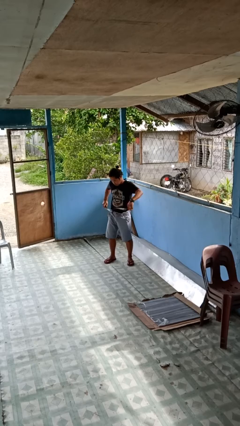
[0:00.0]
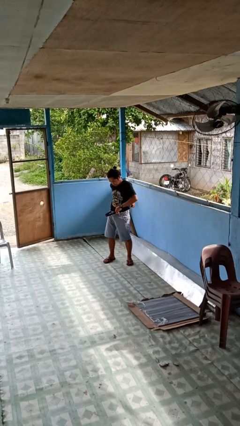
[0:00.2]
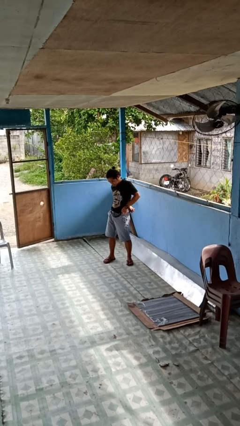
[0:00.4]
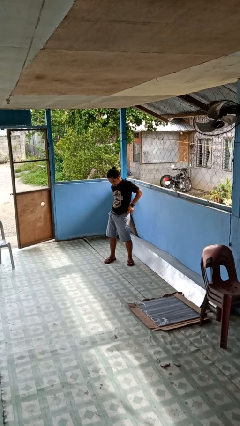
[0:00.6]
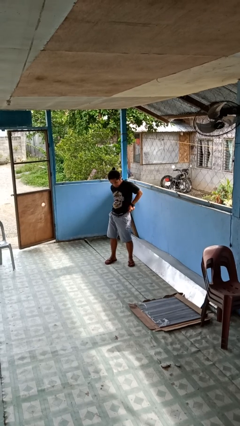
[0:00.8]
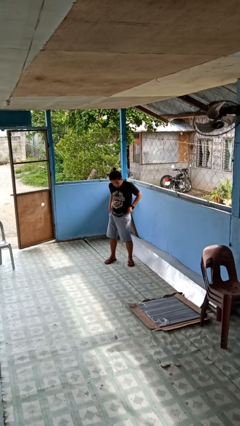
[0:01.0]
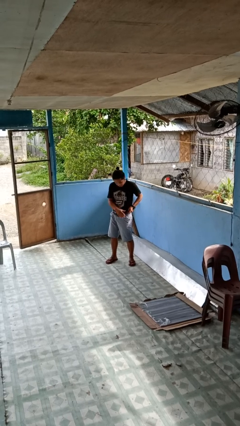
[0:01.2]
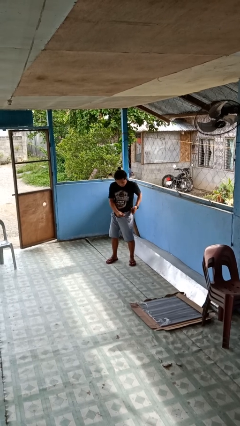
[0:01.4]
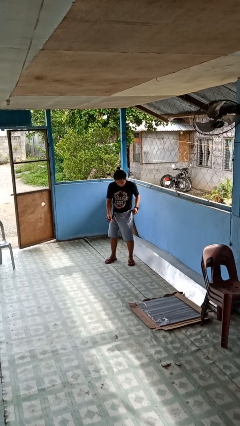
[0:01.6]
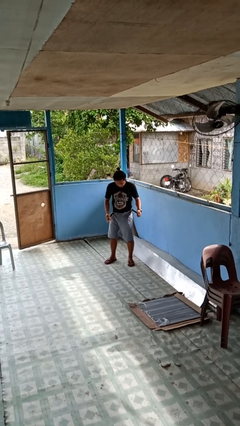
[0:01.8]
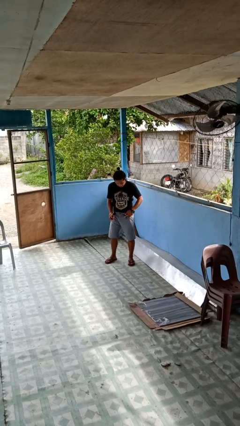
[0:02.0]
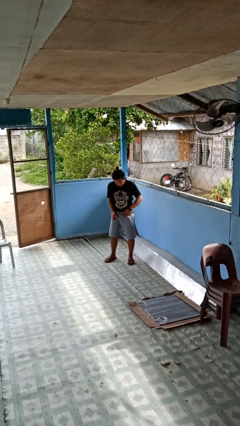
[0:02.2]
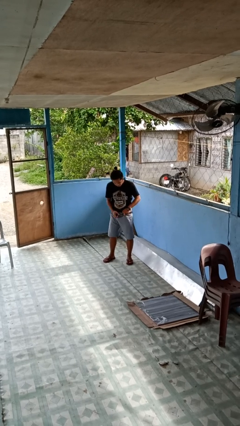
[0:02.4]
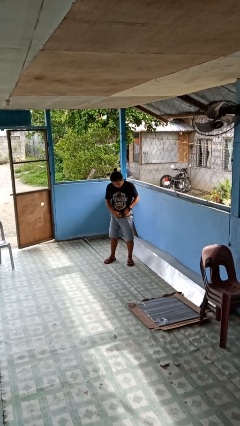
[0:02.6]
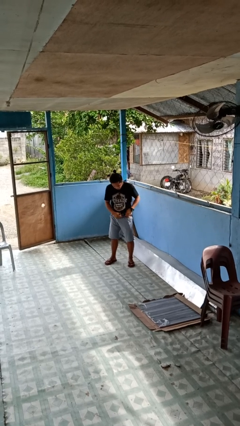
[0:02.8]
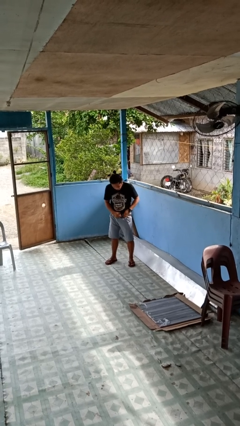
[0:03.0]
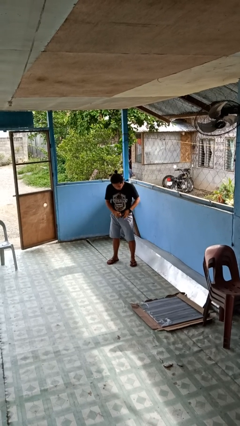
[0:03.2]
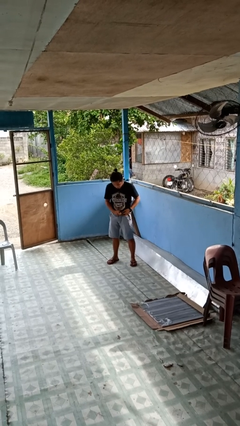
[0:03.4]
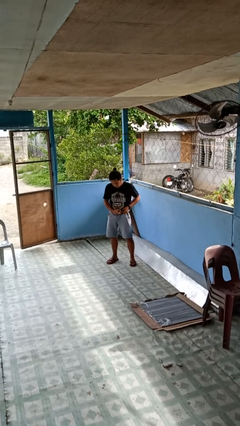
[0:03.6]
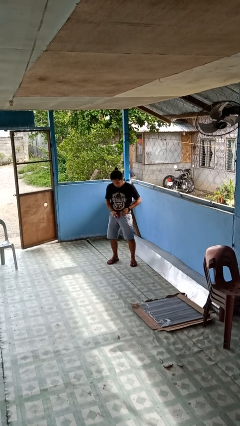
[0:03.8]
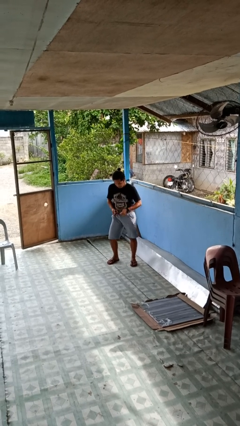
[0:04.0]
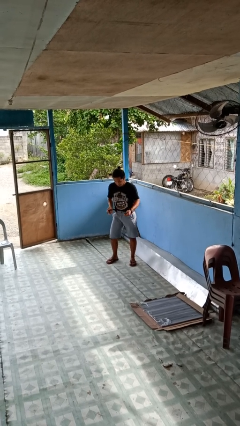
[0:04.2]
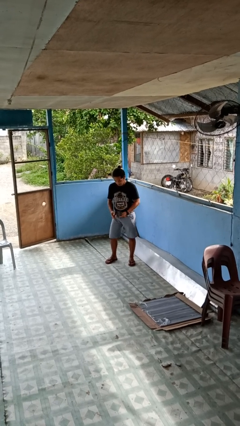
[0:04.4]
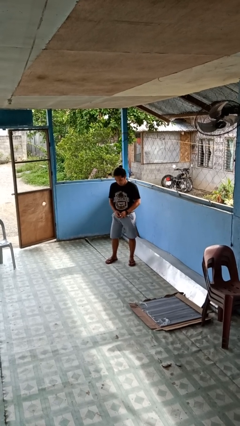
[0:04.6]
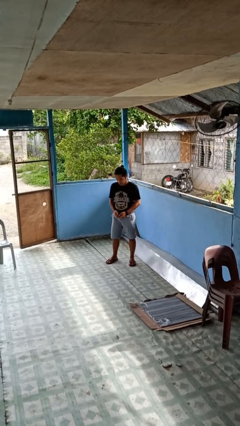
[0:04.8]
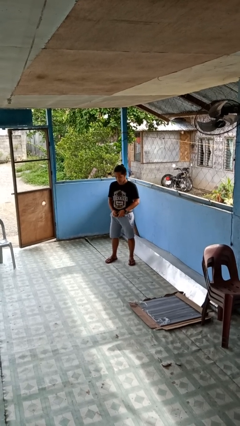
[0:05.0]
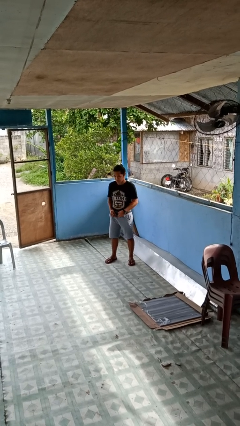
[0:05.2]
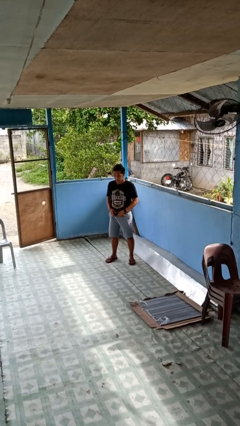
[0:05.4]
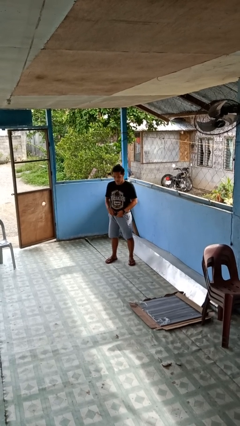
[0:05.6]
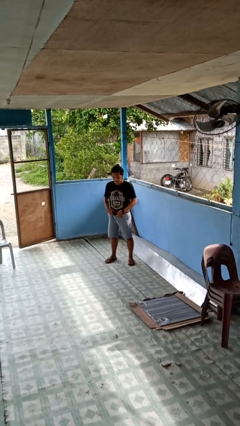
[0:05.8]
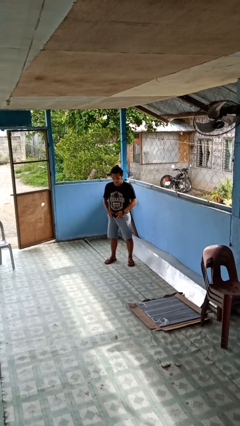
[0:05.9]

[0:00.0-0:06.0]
person puts on belt

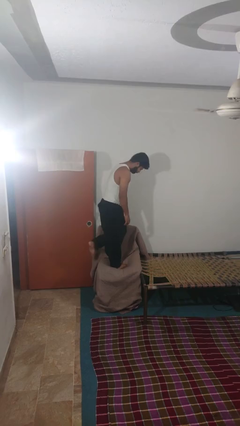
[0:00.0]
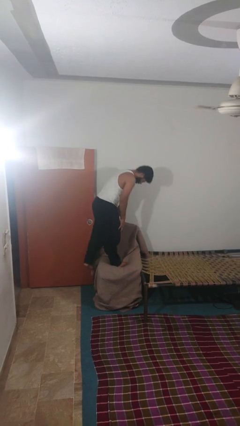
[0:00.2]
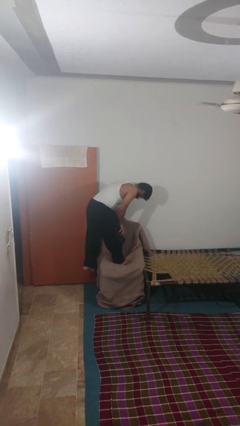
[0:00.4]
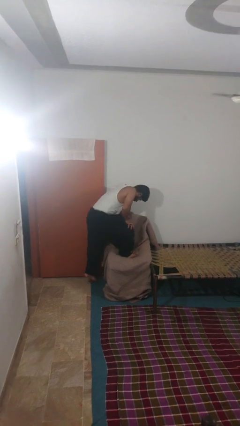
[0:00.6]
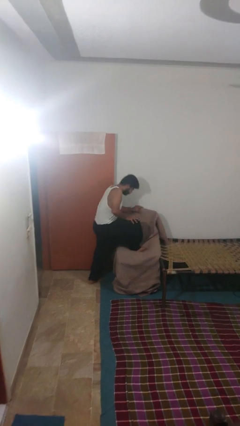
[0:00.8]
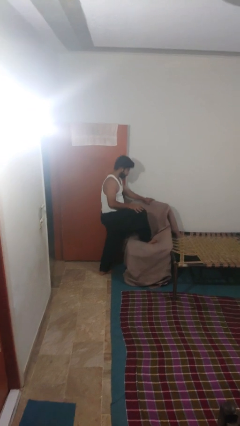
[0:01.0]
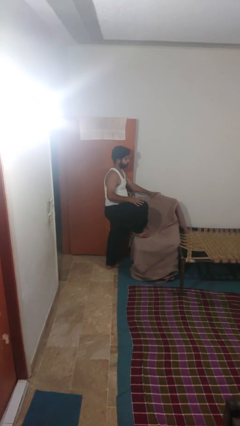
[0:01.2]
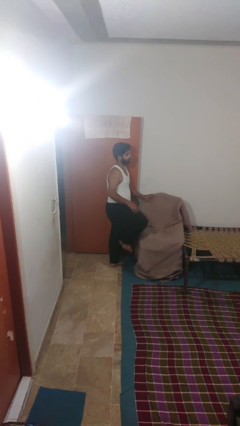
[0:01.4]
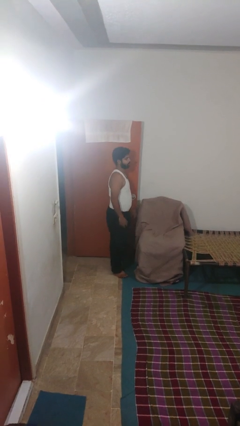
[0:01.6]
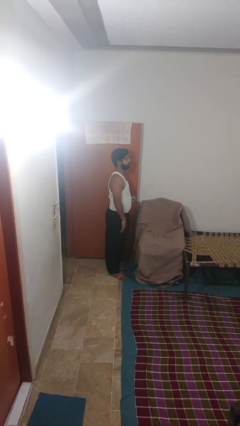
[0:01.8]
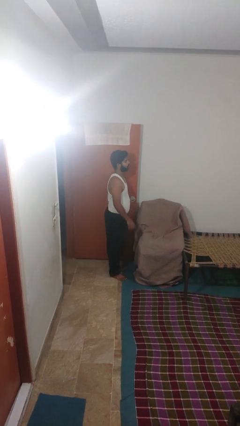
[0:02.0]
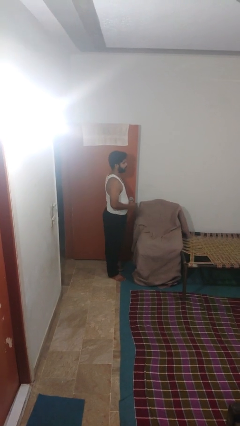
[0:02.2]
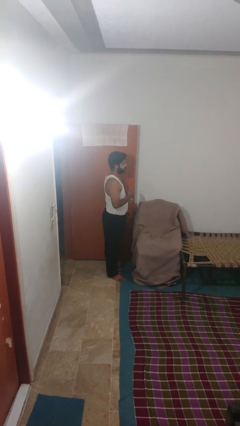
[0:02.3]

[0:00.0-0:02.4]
person climbs off couch

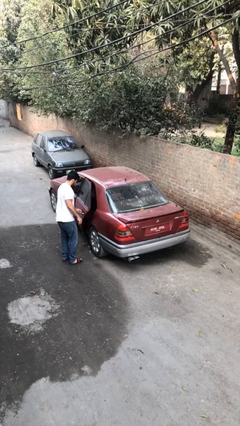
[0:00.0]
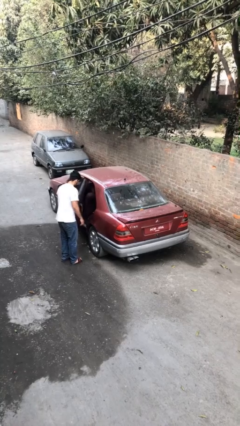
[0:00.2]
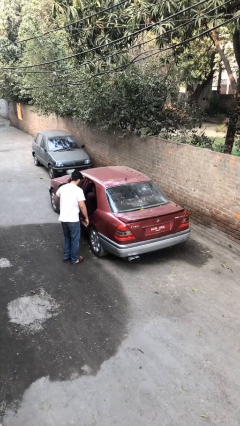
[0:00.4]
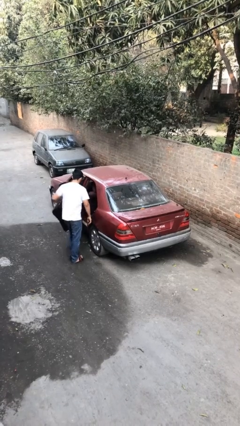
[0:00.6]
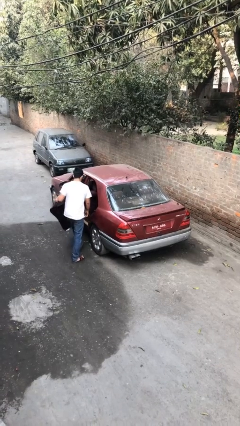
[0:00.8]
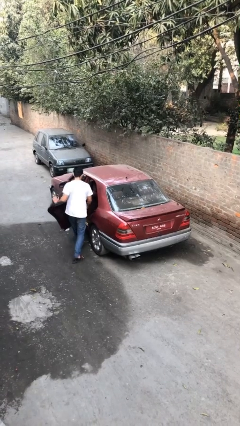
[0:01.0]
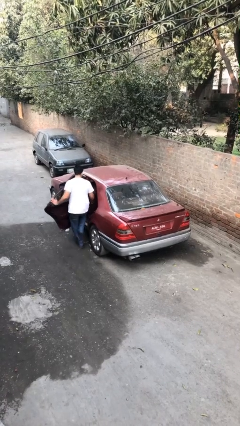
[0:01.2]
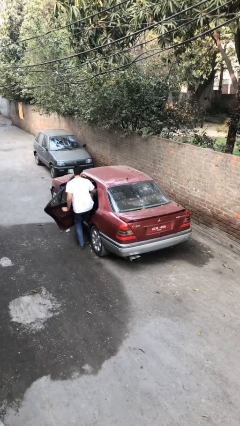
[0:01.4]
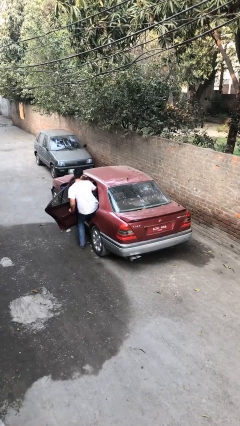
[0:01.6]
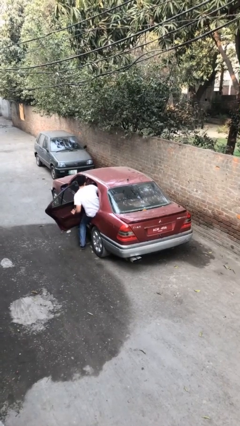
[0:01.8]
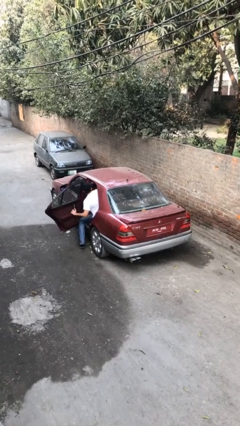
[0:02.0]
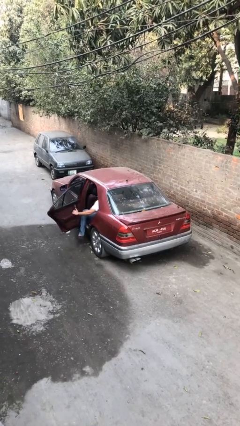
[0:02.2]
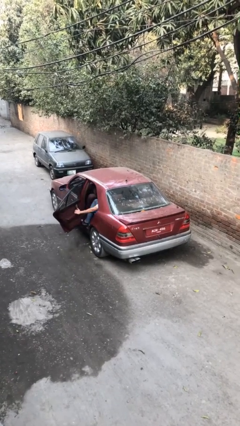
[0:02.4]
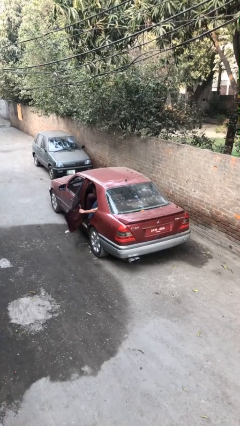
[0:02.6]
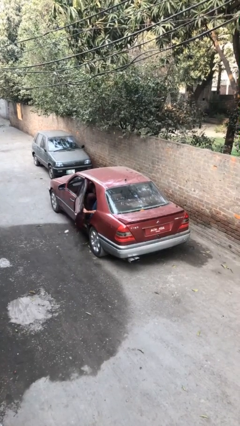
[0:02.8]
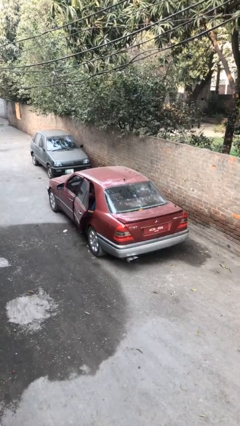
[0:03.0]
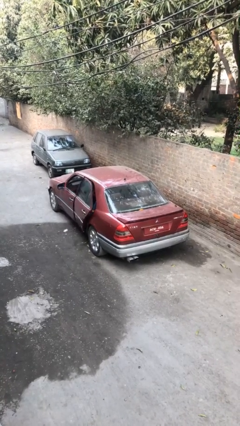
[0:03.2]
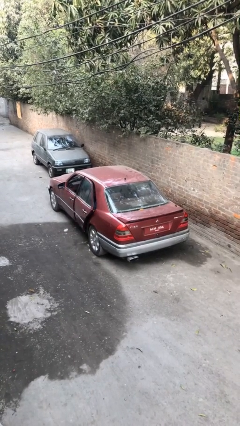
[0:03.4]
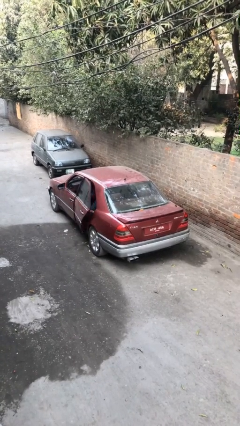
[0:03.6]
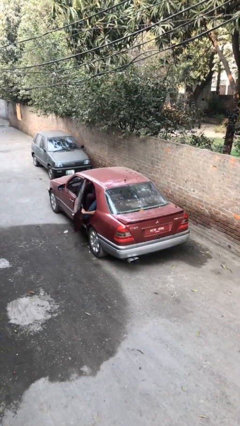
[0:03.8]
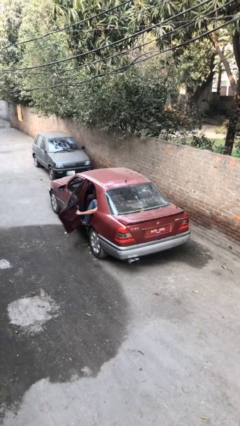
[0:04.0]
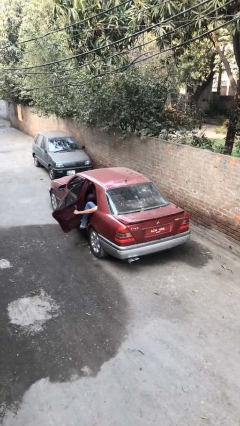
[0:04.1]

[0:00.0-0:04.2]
car picks up person

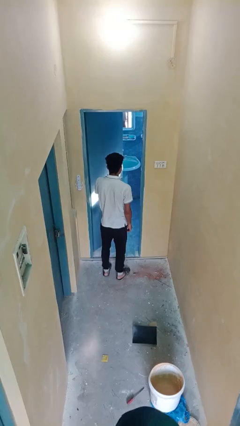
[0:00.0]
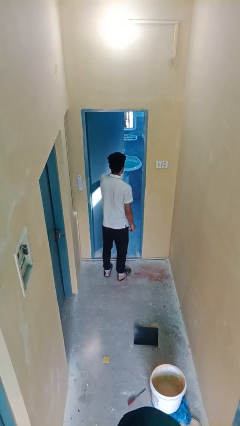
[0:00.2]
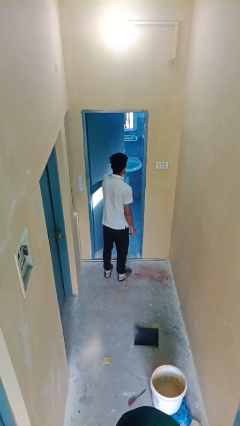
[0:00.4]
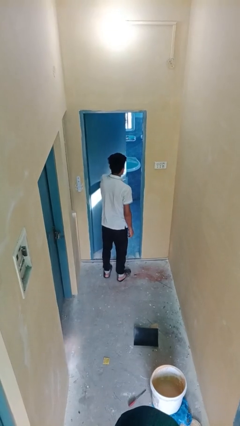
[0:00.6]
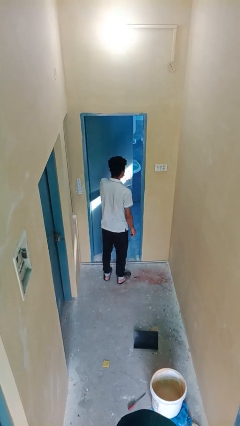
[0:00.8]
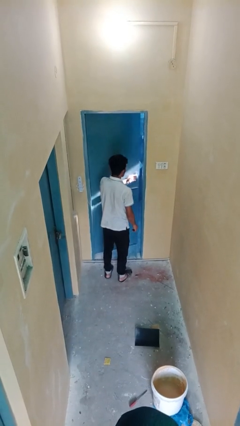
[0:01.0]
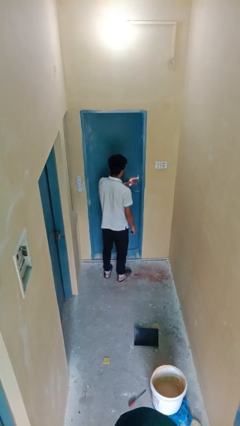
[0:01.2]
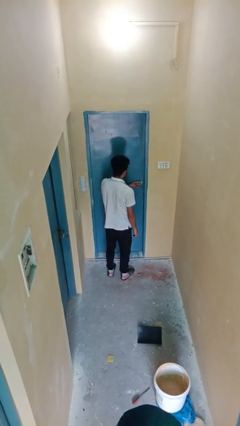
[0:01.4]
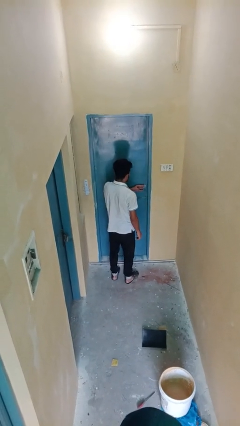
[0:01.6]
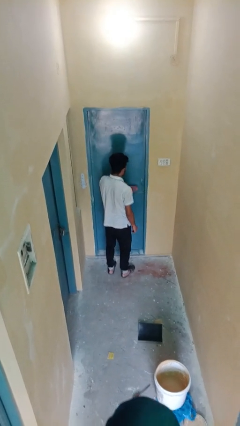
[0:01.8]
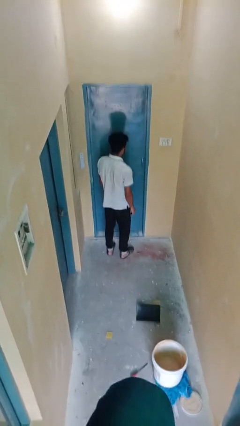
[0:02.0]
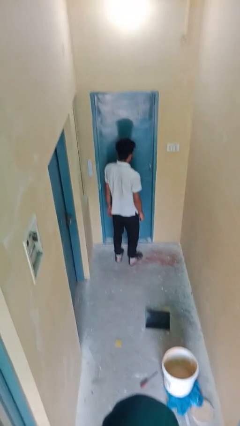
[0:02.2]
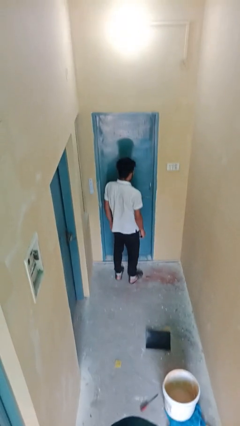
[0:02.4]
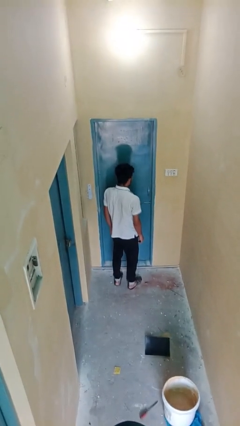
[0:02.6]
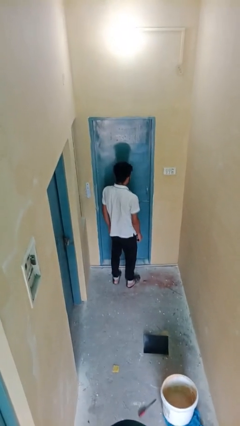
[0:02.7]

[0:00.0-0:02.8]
person closes facility door

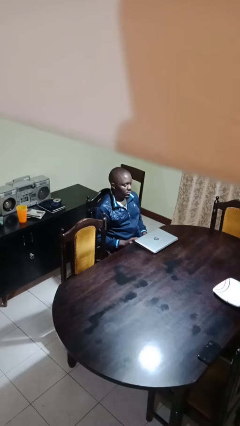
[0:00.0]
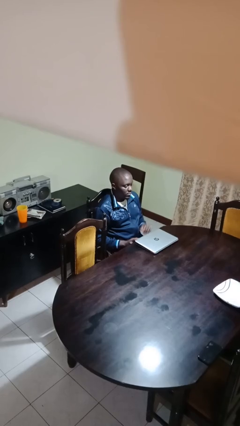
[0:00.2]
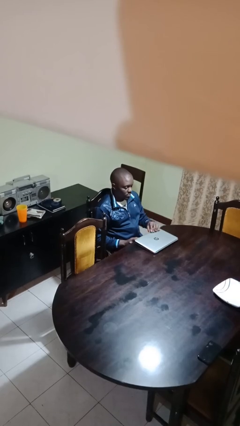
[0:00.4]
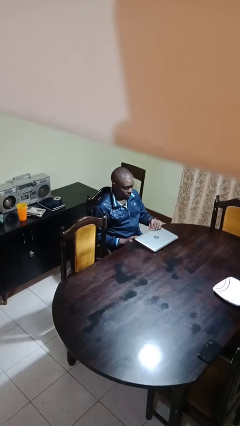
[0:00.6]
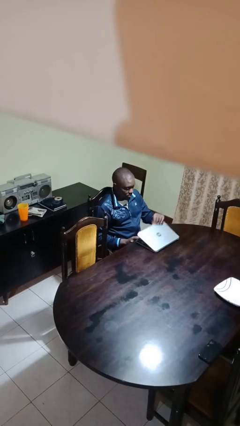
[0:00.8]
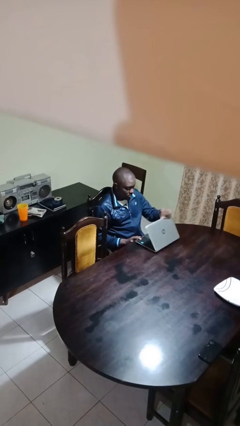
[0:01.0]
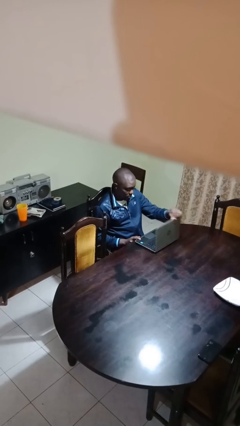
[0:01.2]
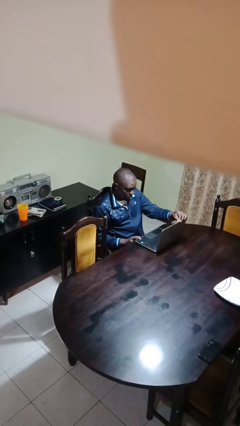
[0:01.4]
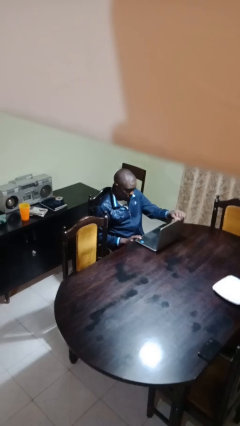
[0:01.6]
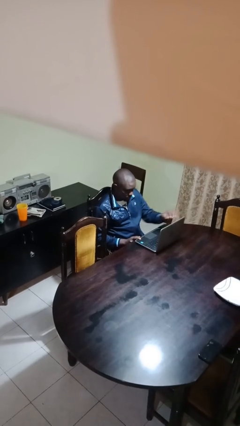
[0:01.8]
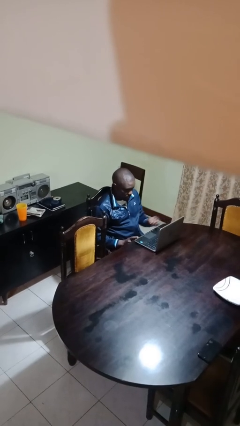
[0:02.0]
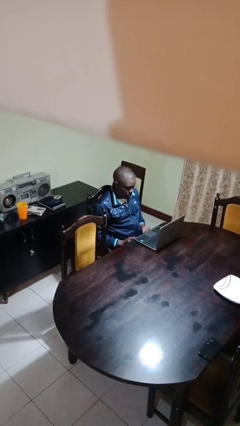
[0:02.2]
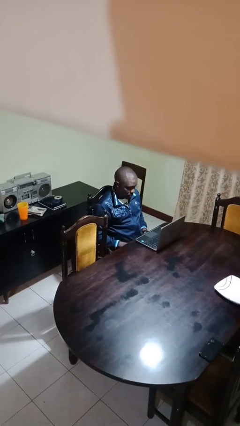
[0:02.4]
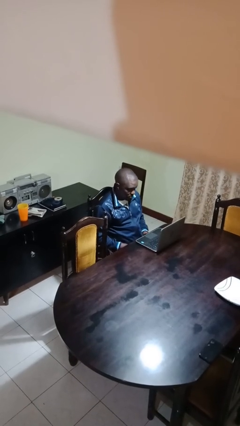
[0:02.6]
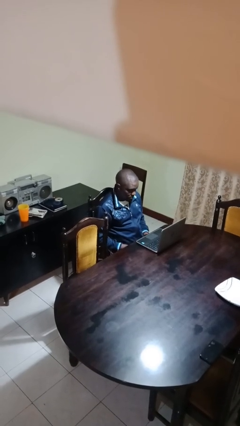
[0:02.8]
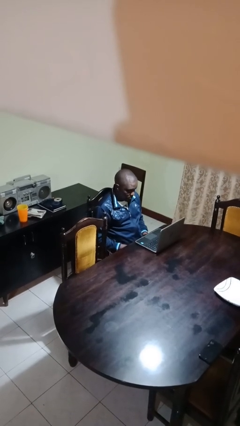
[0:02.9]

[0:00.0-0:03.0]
person opens laptop
